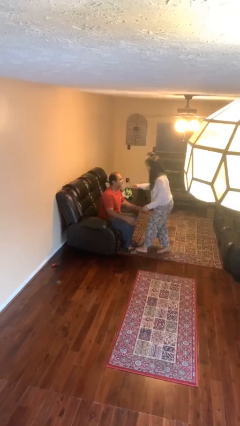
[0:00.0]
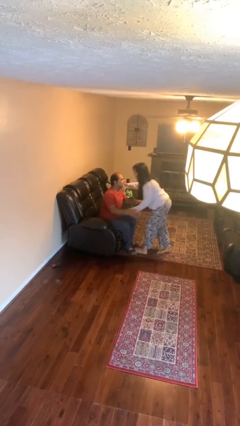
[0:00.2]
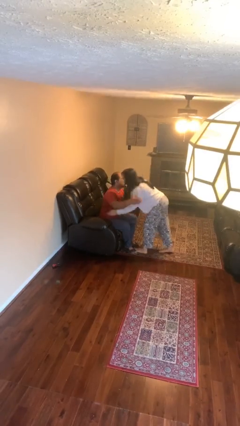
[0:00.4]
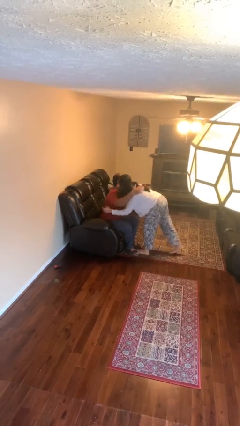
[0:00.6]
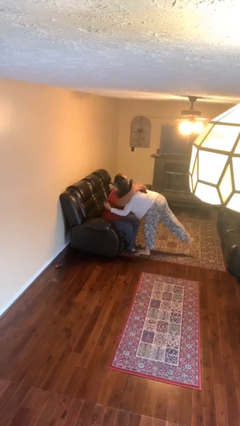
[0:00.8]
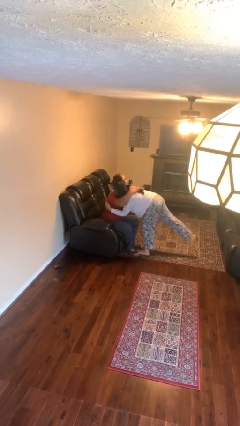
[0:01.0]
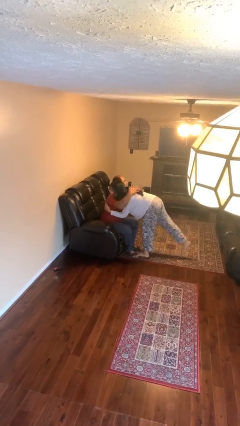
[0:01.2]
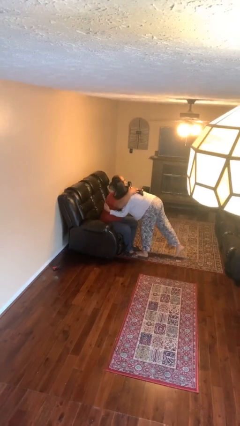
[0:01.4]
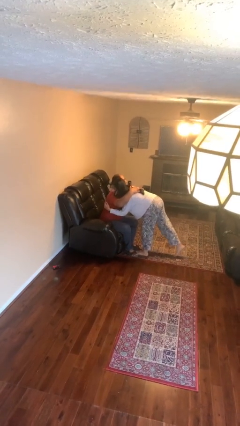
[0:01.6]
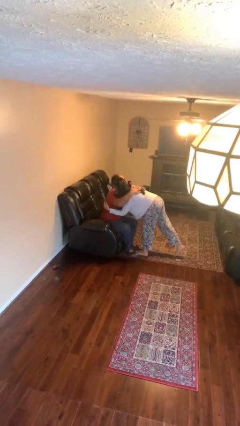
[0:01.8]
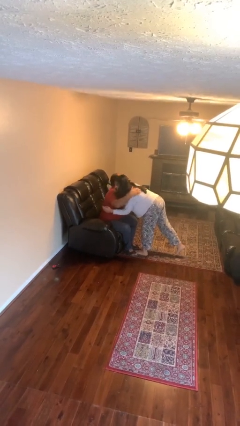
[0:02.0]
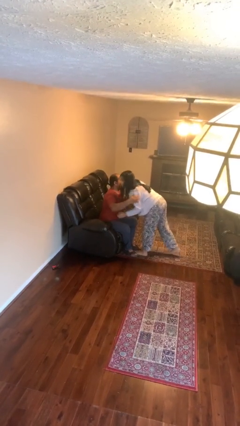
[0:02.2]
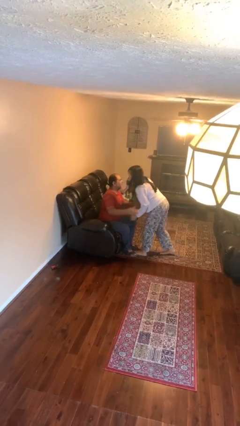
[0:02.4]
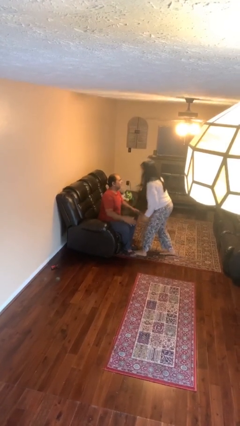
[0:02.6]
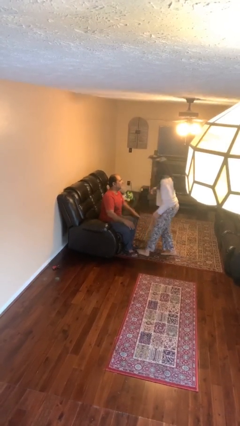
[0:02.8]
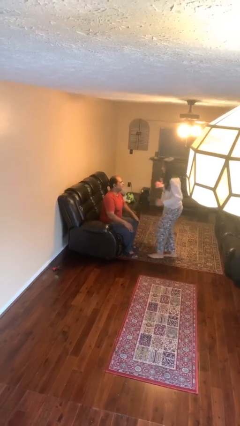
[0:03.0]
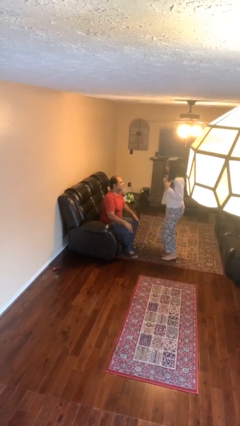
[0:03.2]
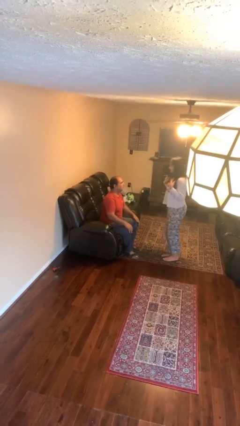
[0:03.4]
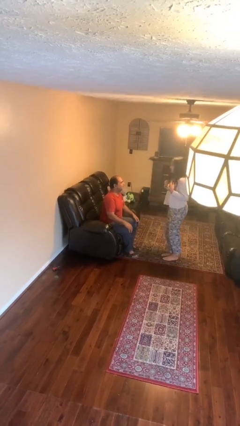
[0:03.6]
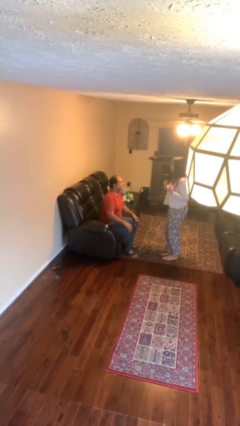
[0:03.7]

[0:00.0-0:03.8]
person embraces person

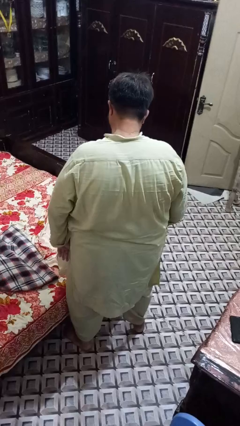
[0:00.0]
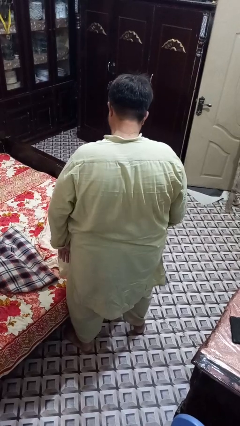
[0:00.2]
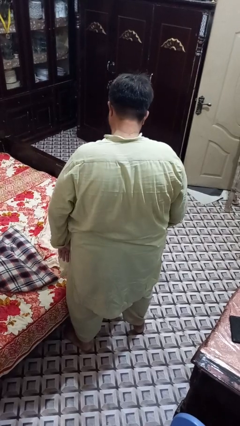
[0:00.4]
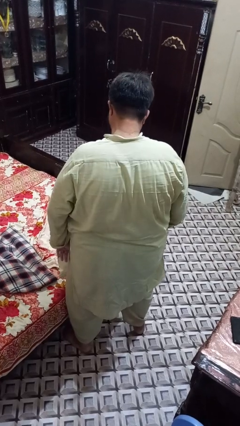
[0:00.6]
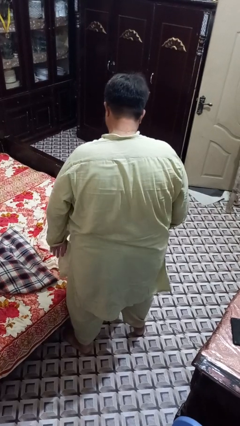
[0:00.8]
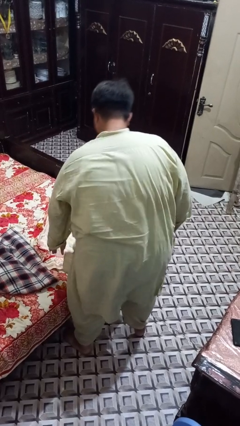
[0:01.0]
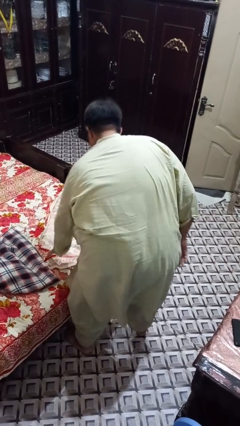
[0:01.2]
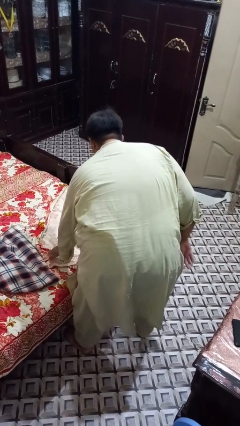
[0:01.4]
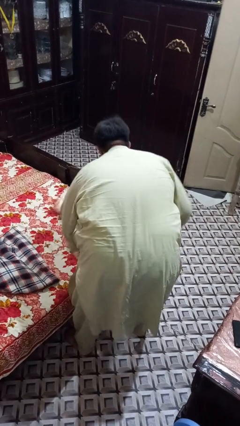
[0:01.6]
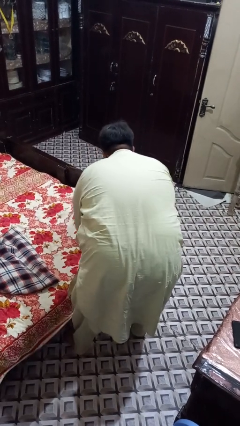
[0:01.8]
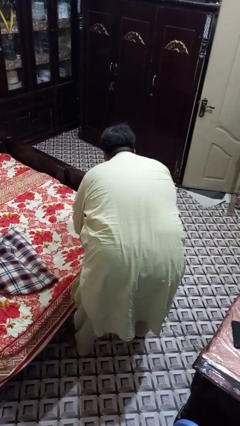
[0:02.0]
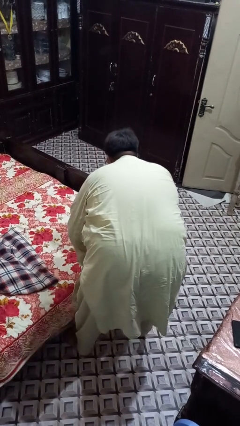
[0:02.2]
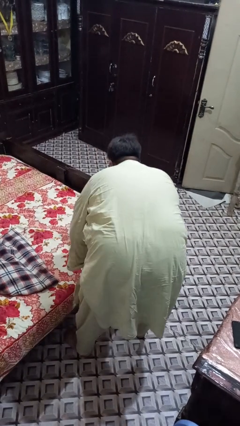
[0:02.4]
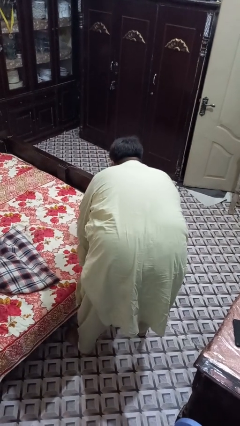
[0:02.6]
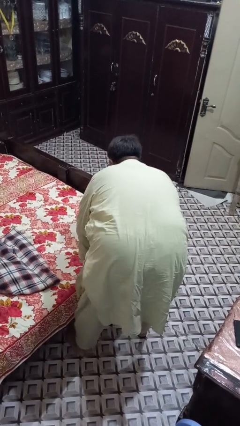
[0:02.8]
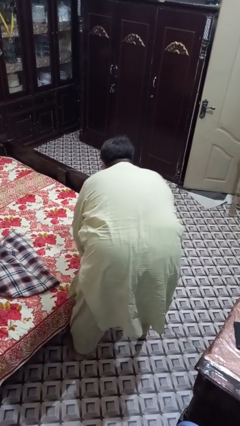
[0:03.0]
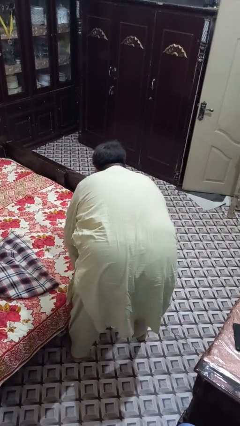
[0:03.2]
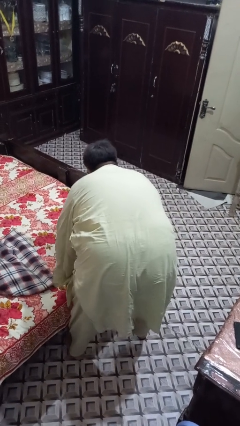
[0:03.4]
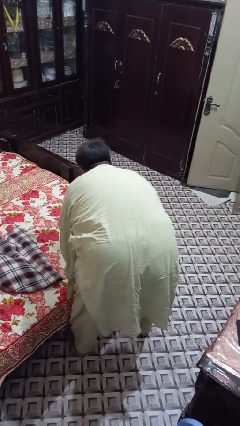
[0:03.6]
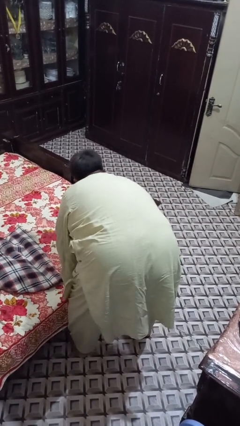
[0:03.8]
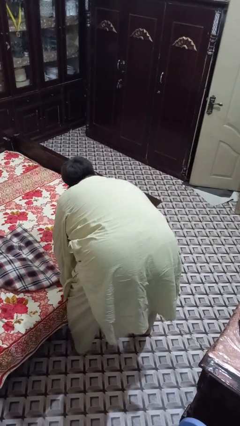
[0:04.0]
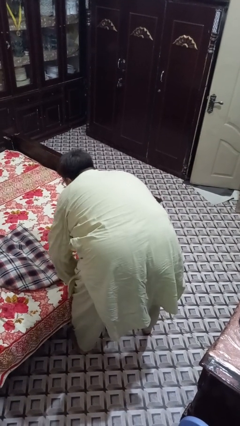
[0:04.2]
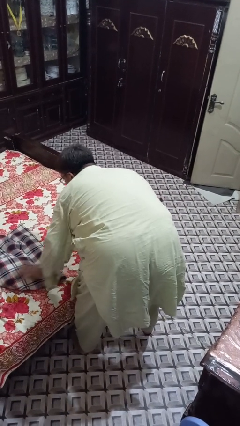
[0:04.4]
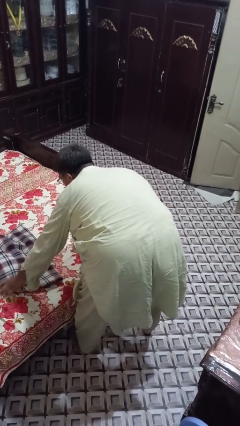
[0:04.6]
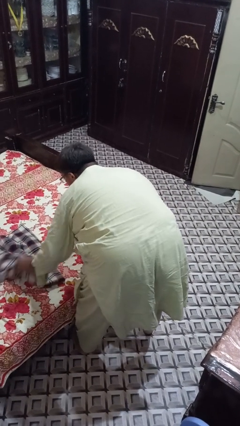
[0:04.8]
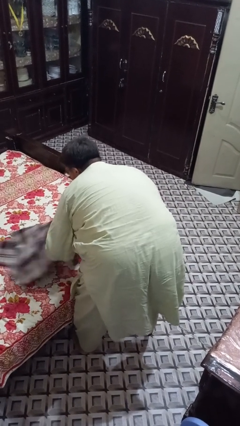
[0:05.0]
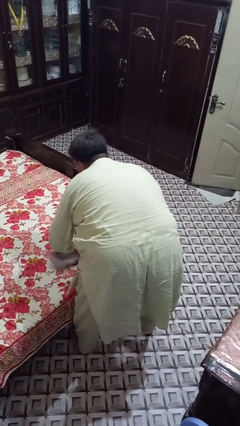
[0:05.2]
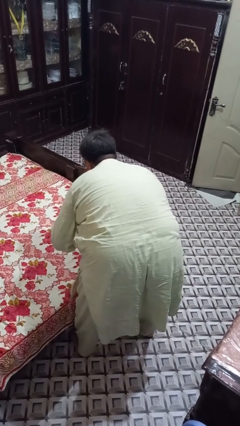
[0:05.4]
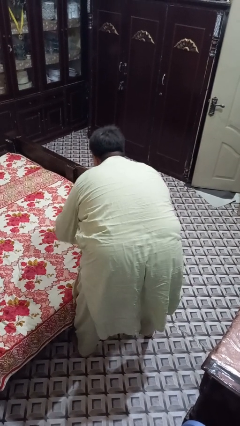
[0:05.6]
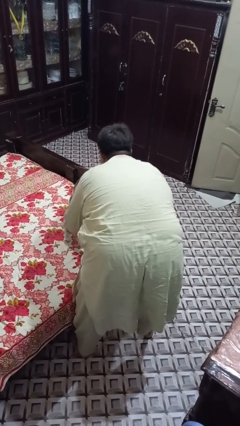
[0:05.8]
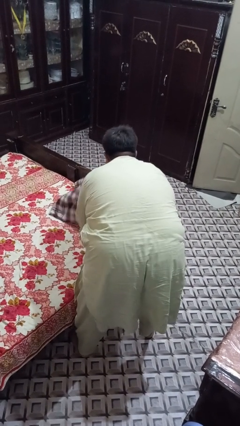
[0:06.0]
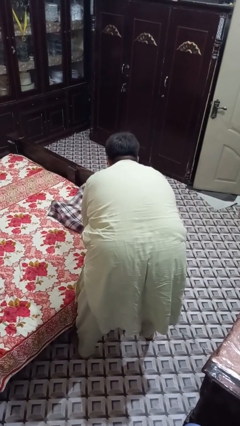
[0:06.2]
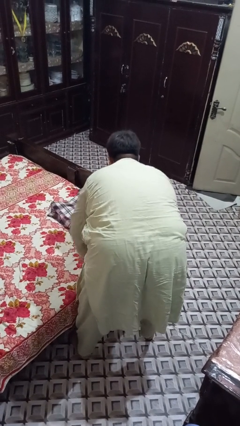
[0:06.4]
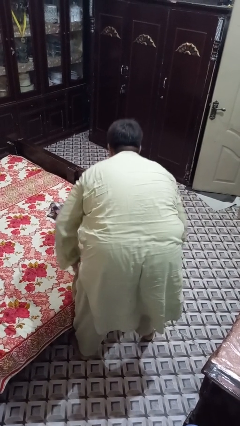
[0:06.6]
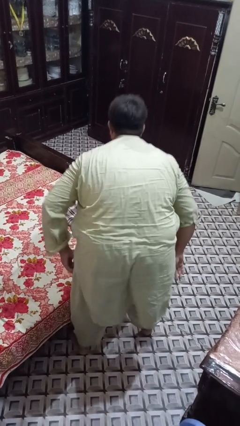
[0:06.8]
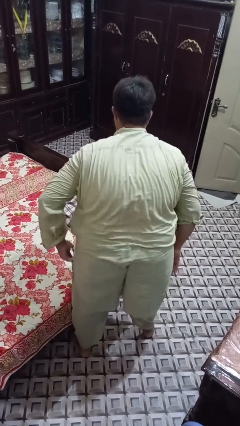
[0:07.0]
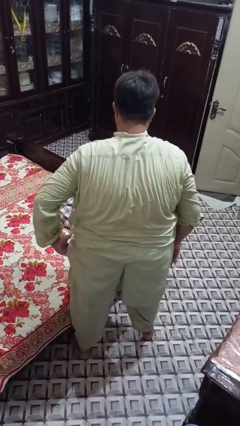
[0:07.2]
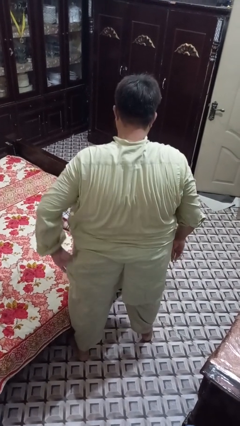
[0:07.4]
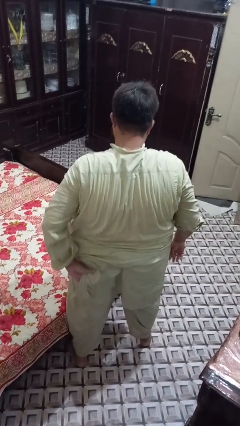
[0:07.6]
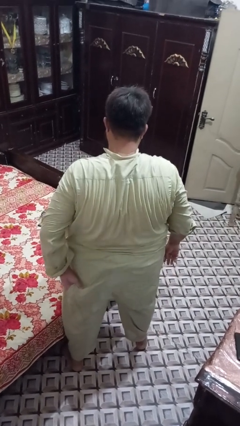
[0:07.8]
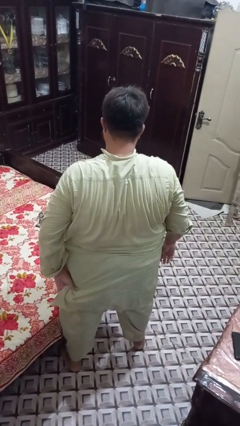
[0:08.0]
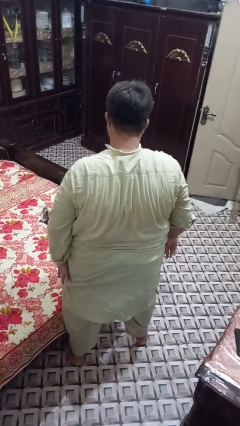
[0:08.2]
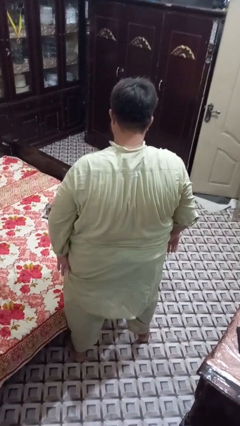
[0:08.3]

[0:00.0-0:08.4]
person makes bed

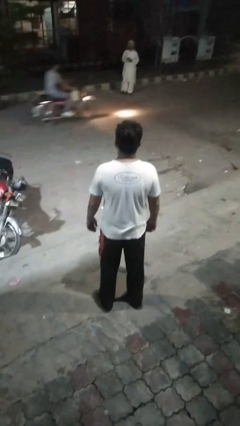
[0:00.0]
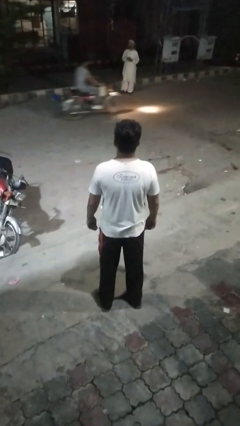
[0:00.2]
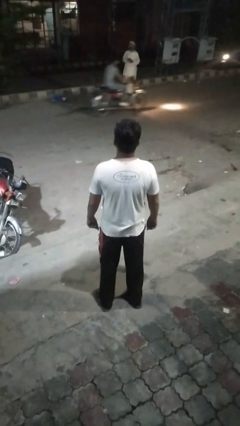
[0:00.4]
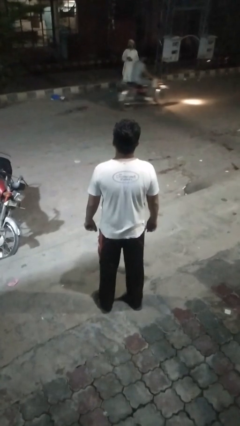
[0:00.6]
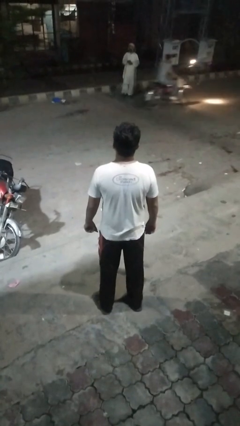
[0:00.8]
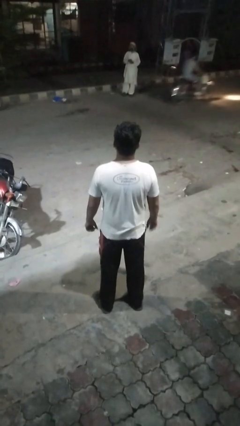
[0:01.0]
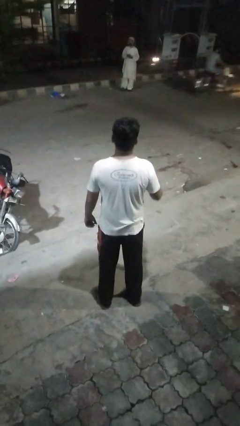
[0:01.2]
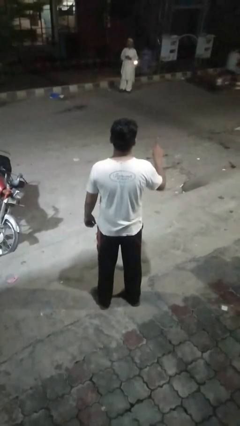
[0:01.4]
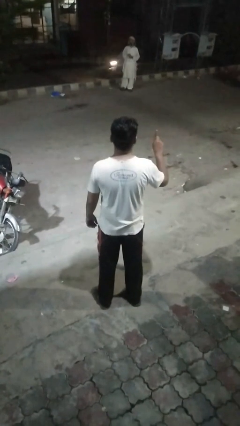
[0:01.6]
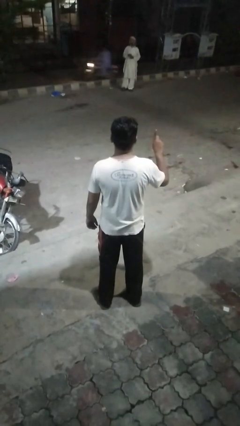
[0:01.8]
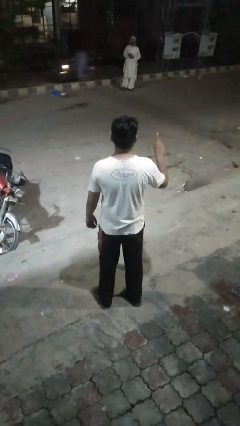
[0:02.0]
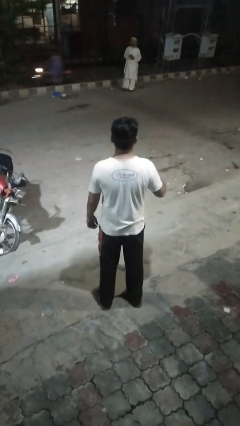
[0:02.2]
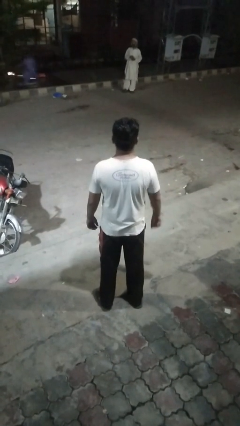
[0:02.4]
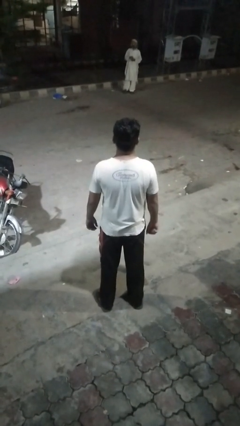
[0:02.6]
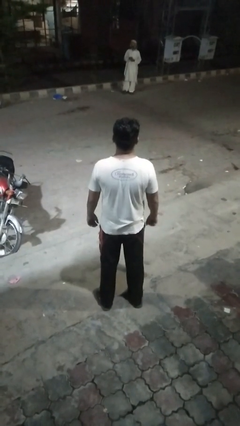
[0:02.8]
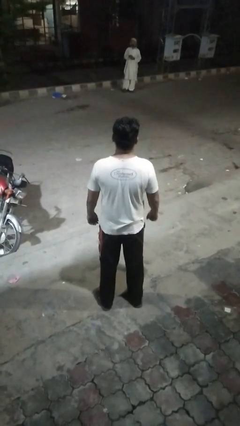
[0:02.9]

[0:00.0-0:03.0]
person gestures number one

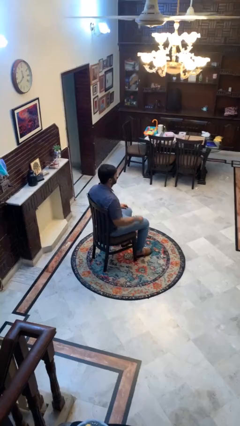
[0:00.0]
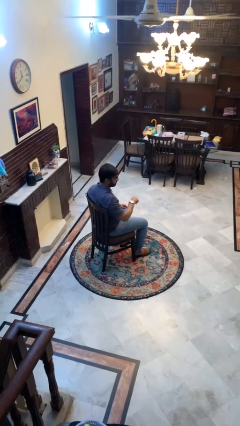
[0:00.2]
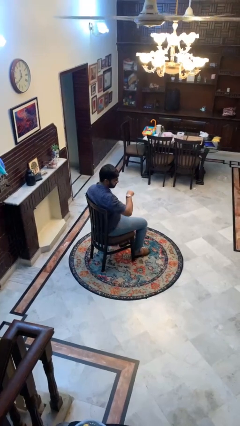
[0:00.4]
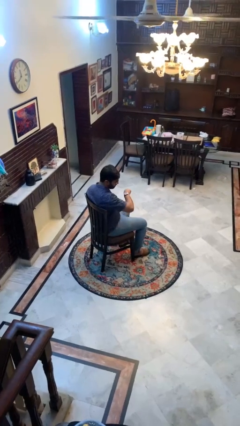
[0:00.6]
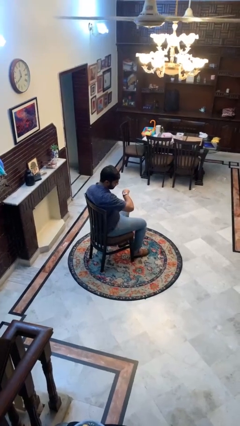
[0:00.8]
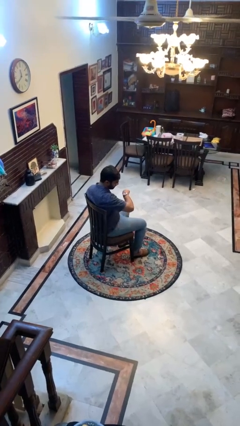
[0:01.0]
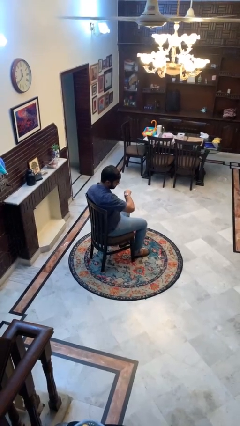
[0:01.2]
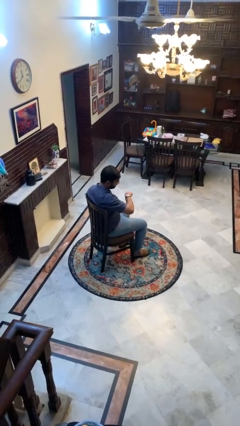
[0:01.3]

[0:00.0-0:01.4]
person looks at wristwatch

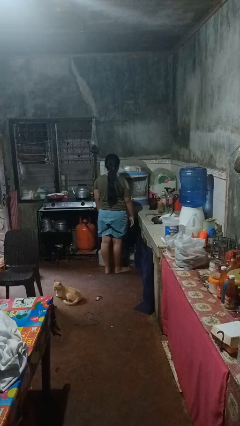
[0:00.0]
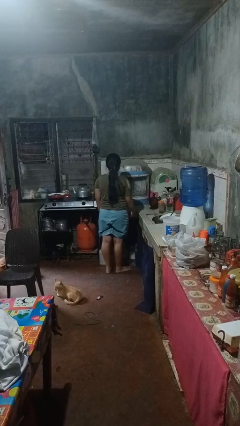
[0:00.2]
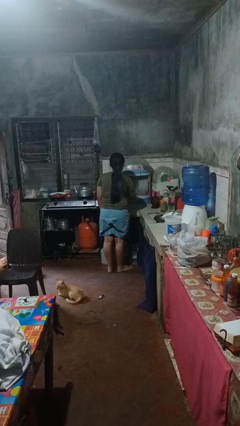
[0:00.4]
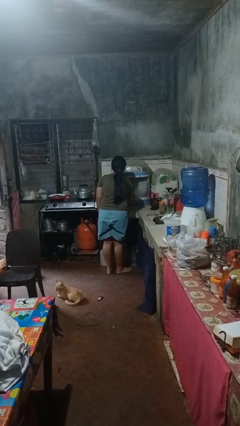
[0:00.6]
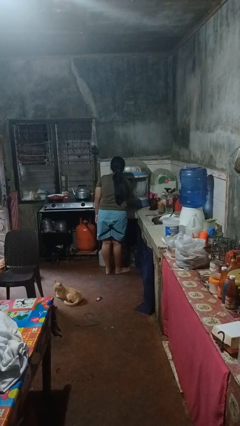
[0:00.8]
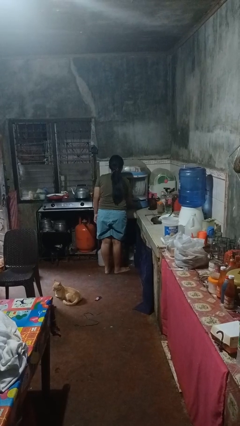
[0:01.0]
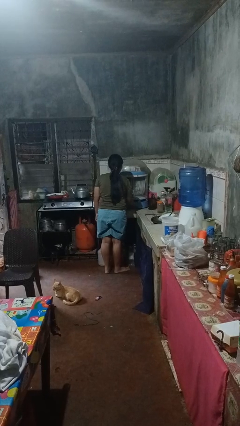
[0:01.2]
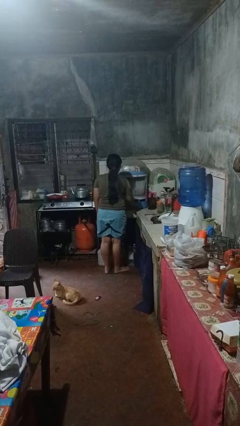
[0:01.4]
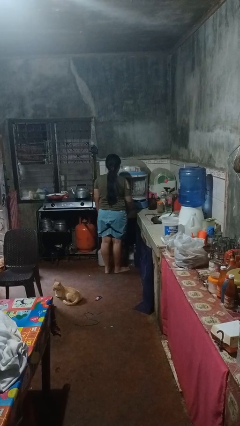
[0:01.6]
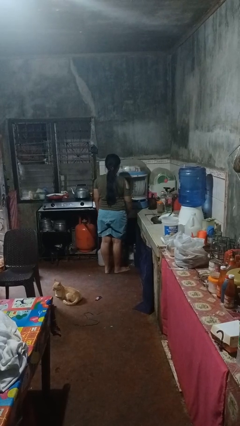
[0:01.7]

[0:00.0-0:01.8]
person opens kitchen drawer
